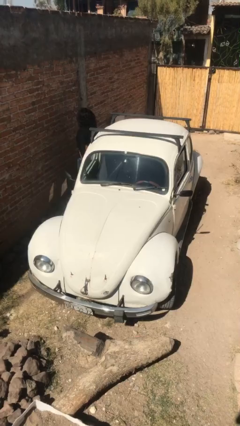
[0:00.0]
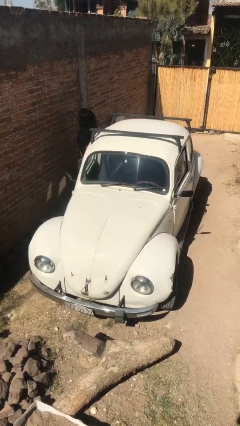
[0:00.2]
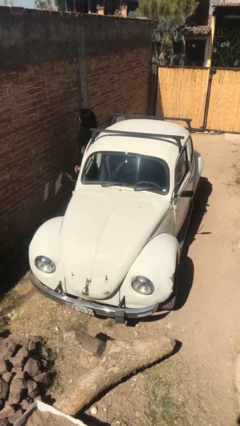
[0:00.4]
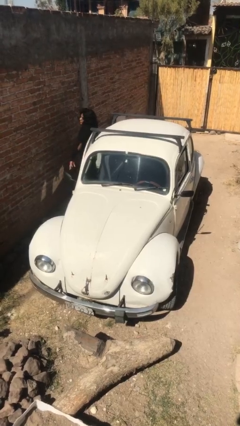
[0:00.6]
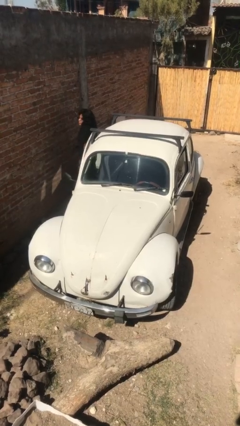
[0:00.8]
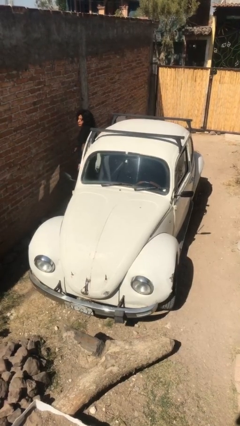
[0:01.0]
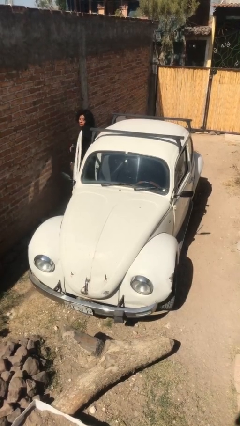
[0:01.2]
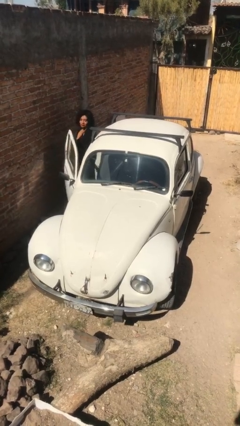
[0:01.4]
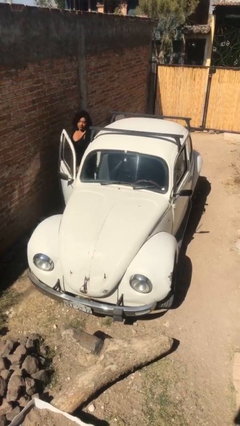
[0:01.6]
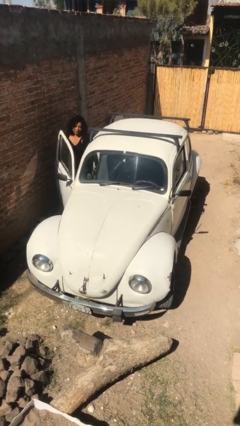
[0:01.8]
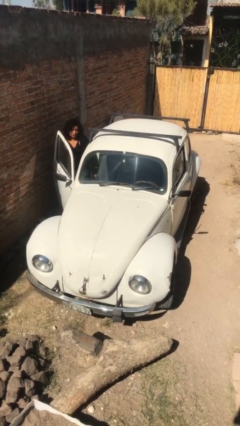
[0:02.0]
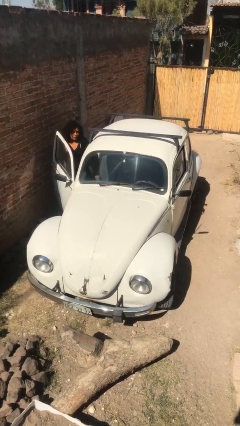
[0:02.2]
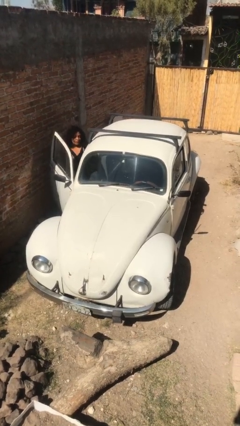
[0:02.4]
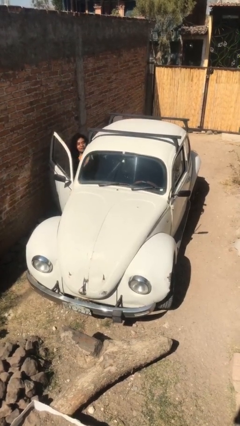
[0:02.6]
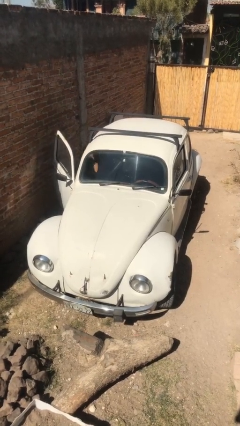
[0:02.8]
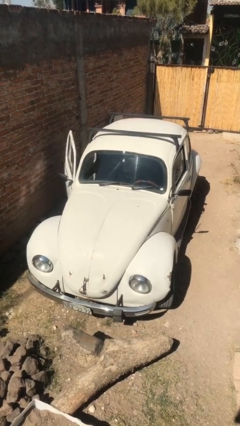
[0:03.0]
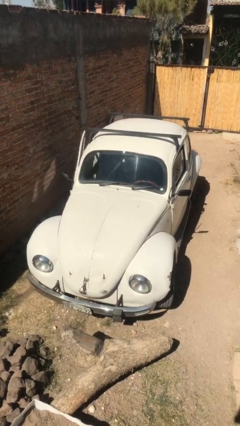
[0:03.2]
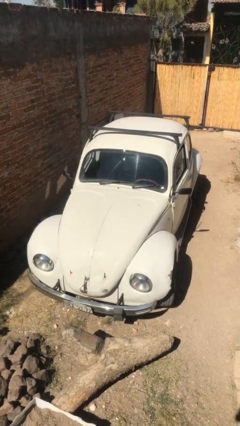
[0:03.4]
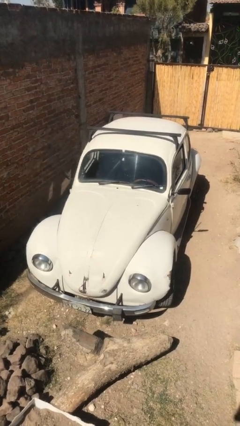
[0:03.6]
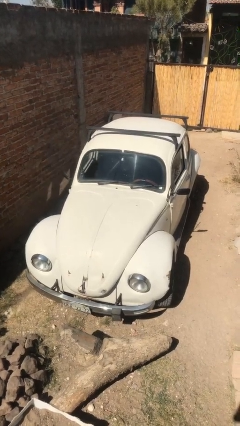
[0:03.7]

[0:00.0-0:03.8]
car picks up person

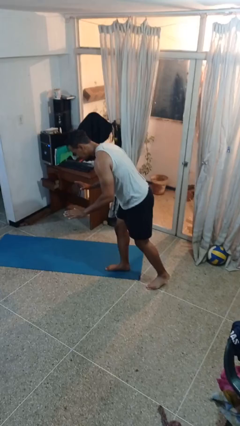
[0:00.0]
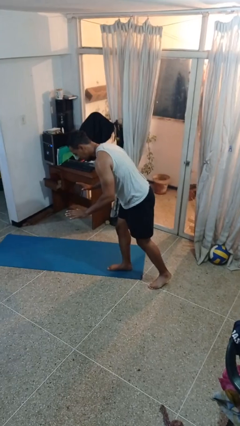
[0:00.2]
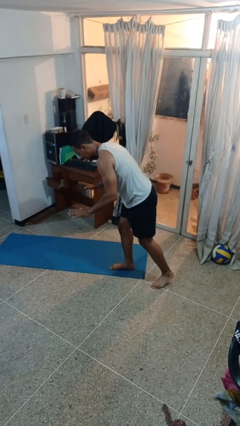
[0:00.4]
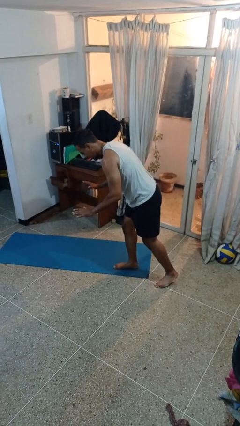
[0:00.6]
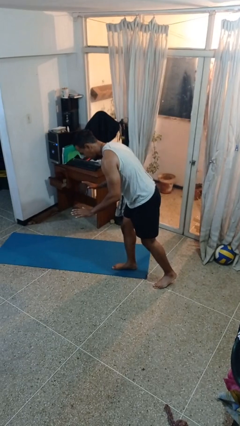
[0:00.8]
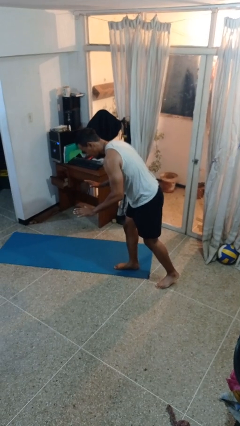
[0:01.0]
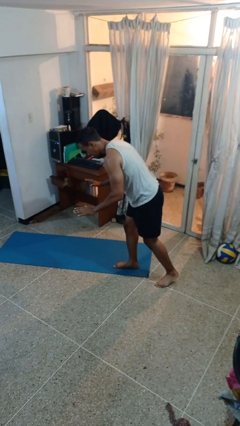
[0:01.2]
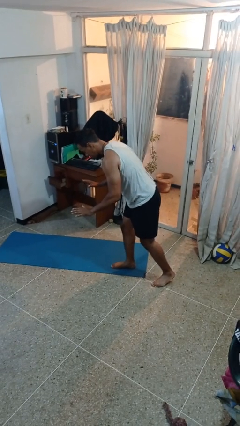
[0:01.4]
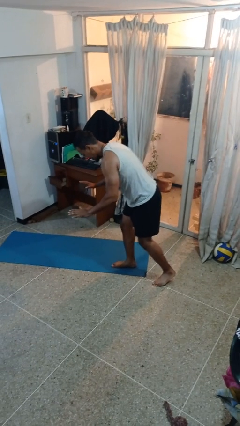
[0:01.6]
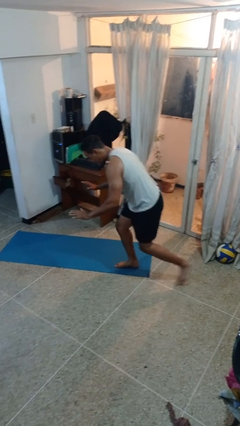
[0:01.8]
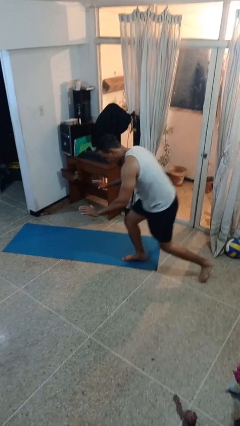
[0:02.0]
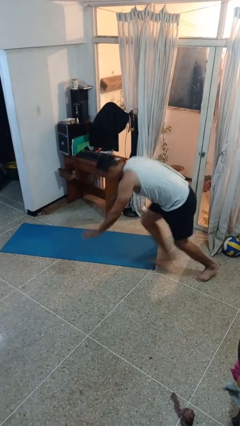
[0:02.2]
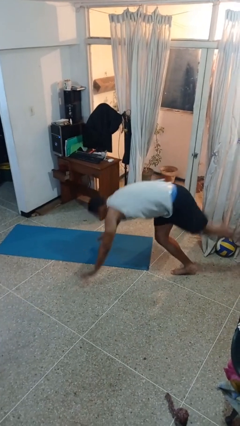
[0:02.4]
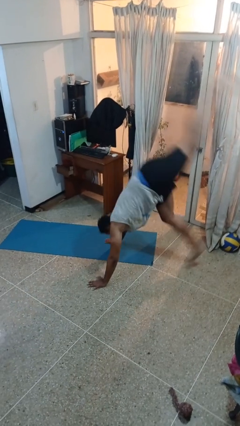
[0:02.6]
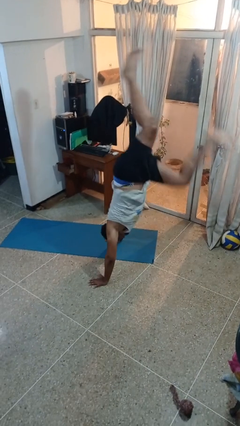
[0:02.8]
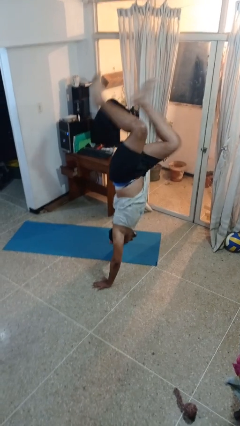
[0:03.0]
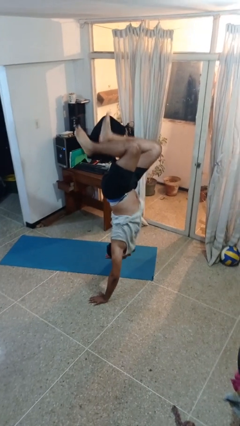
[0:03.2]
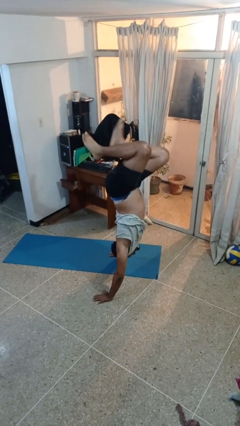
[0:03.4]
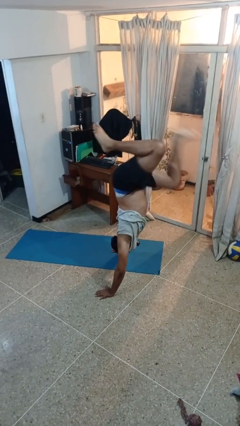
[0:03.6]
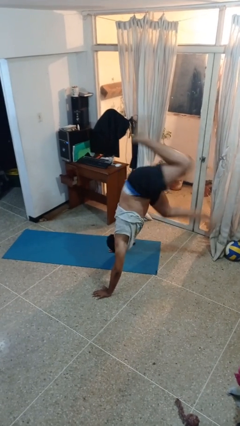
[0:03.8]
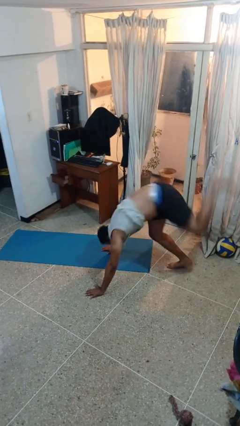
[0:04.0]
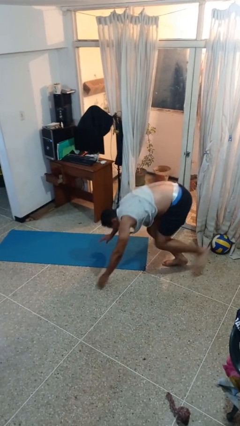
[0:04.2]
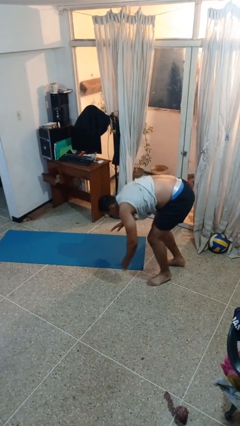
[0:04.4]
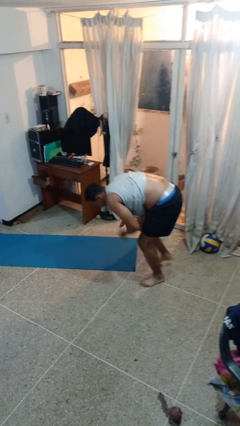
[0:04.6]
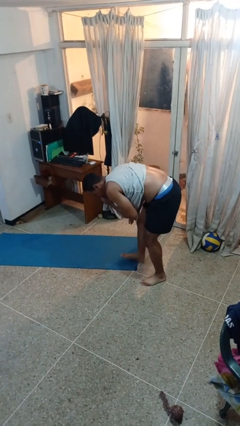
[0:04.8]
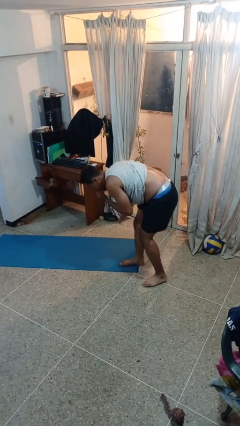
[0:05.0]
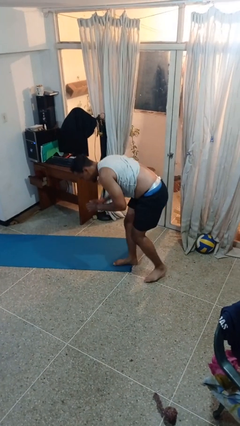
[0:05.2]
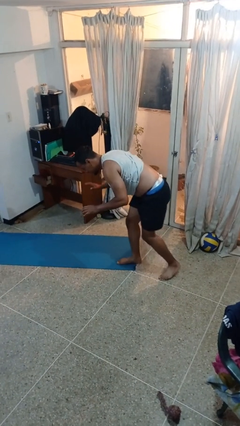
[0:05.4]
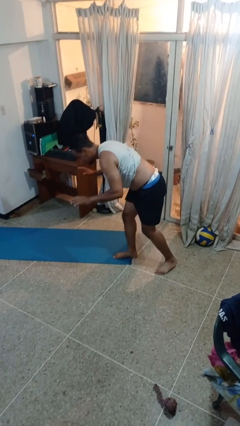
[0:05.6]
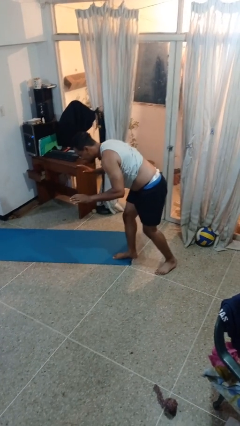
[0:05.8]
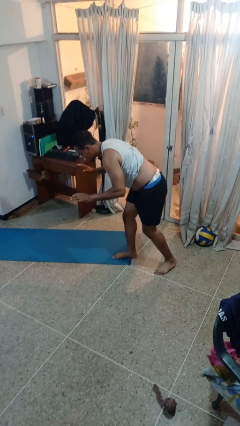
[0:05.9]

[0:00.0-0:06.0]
person handstand

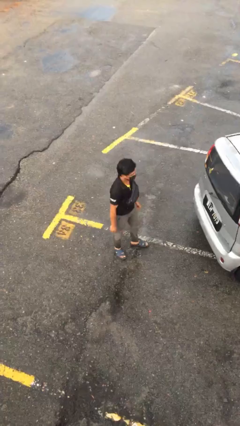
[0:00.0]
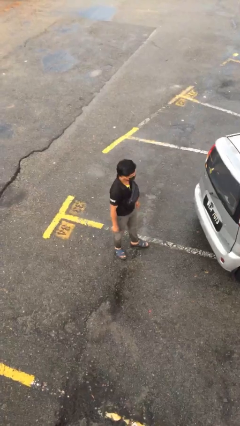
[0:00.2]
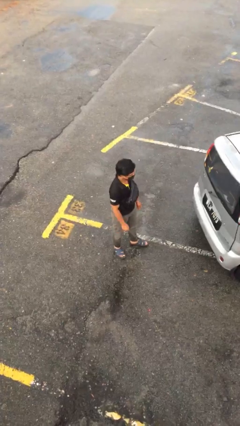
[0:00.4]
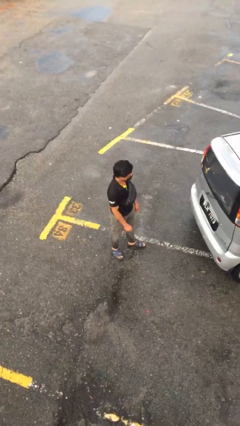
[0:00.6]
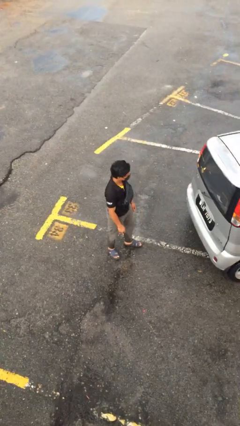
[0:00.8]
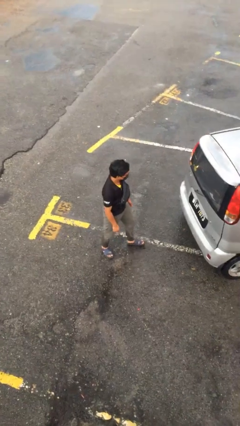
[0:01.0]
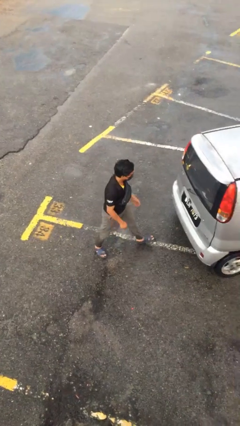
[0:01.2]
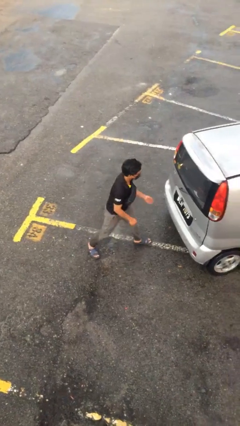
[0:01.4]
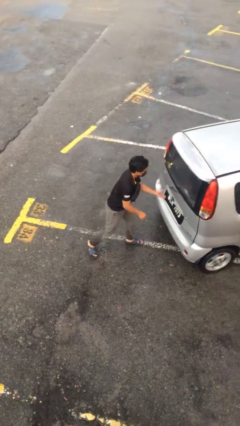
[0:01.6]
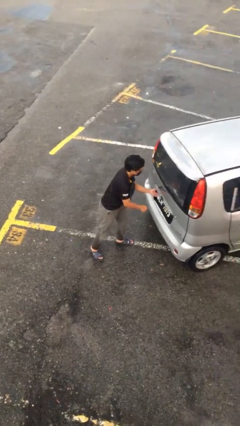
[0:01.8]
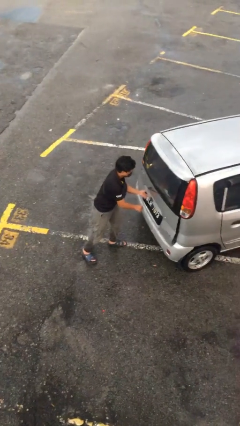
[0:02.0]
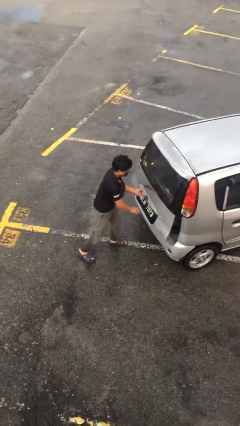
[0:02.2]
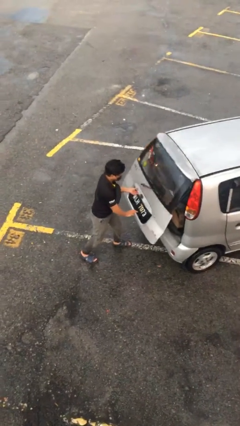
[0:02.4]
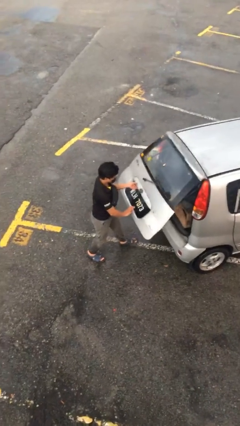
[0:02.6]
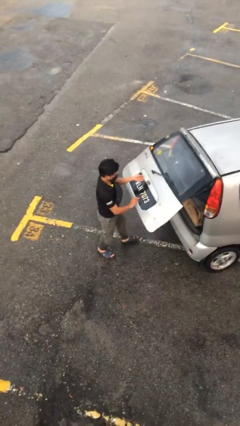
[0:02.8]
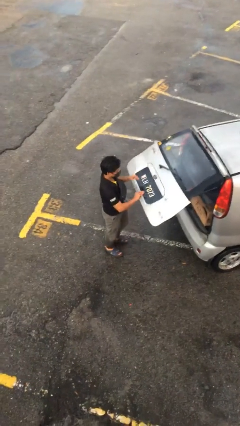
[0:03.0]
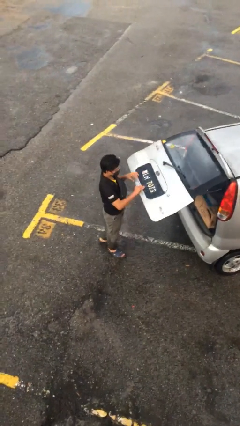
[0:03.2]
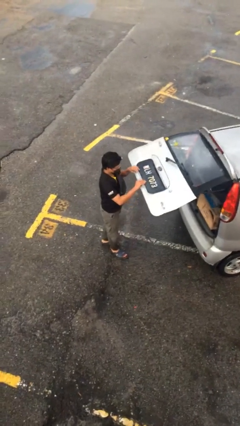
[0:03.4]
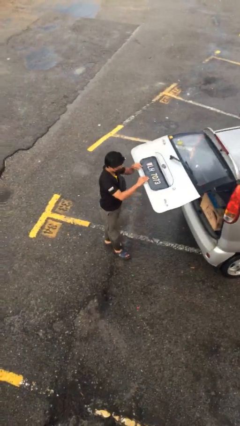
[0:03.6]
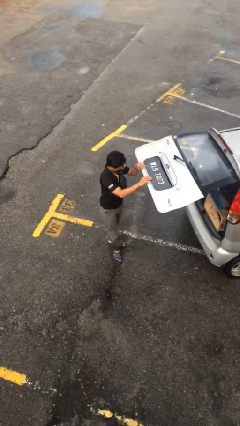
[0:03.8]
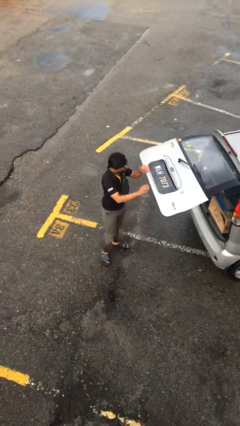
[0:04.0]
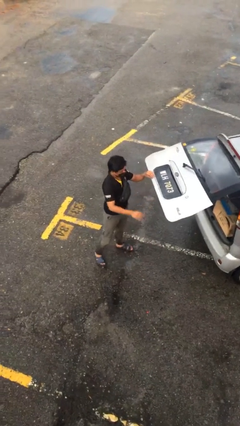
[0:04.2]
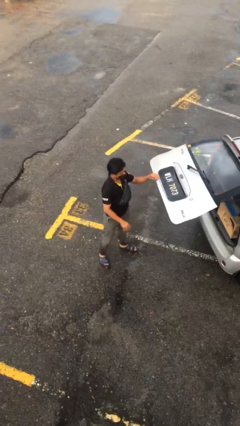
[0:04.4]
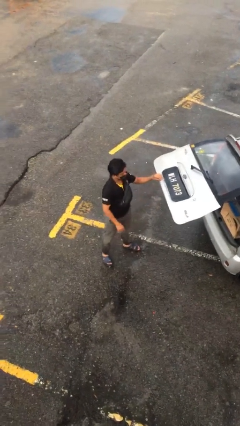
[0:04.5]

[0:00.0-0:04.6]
person opens car trunk

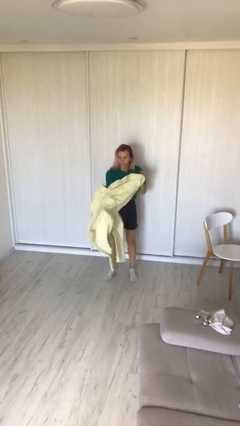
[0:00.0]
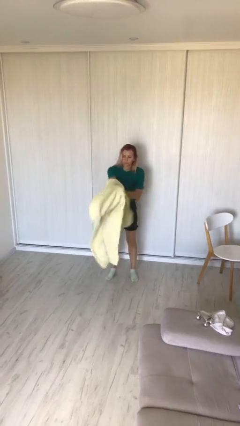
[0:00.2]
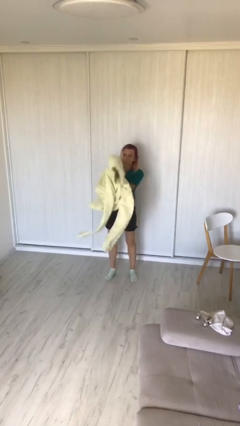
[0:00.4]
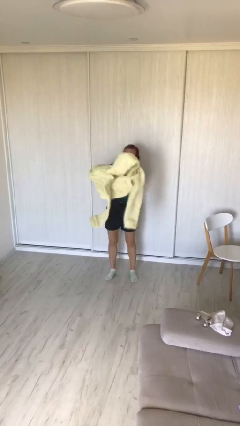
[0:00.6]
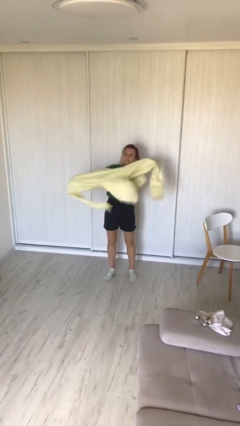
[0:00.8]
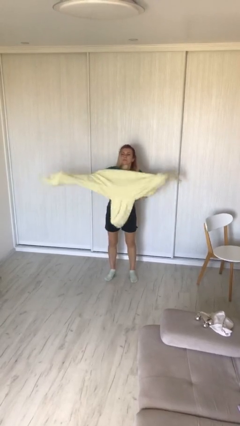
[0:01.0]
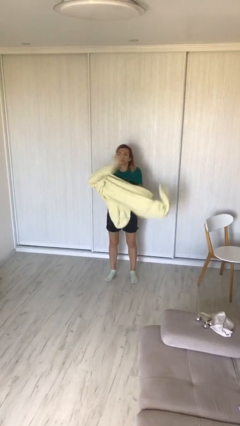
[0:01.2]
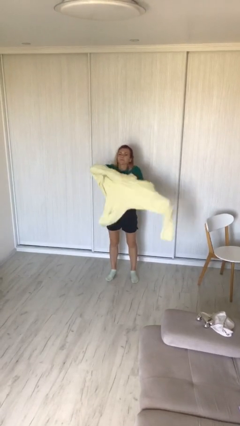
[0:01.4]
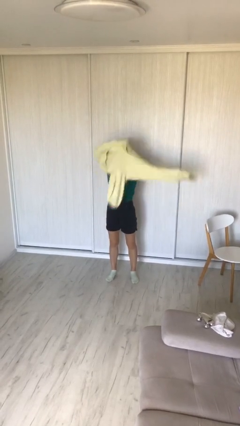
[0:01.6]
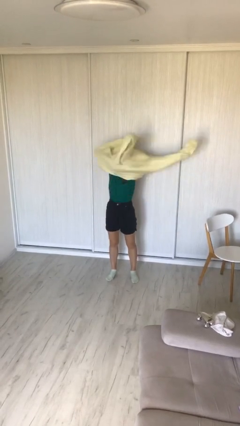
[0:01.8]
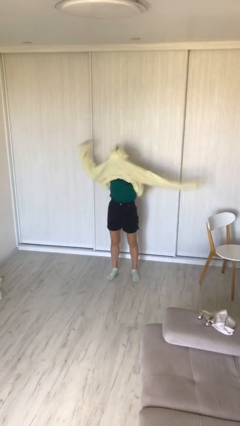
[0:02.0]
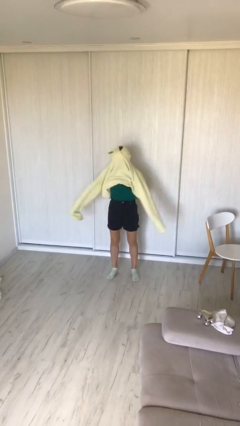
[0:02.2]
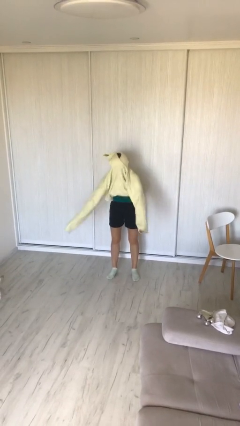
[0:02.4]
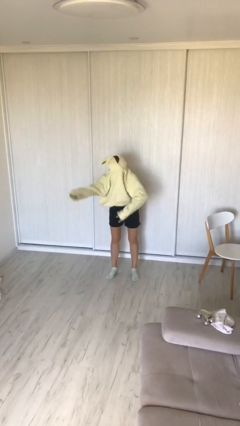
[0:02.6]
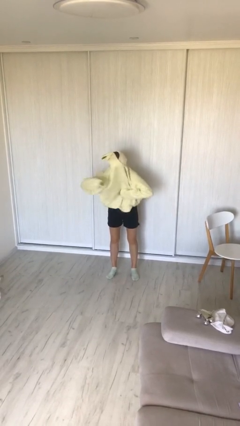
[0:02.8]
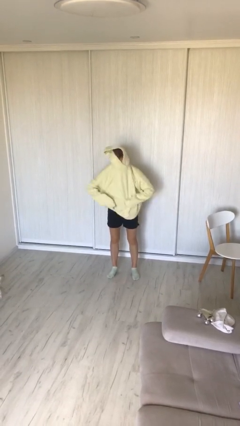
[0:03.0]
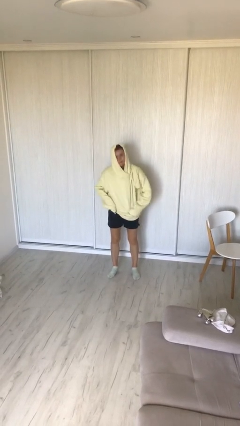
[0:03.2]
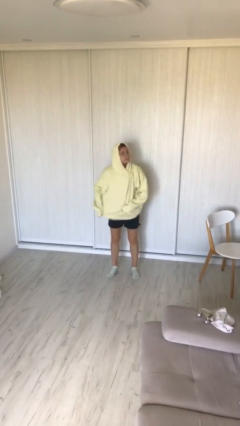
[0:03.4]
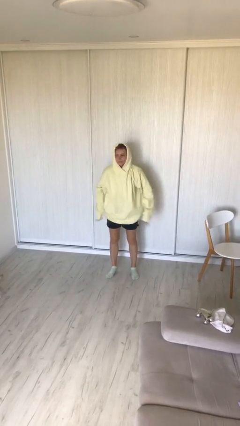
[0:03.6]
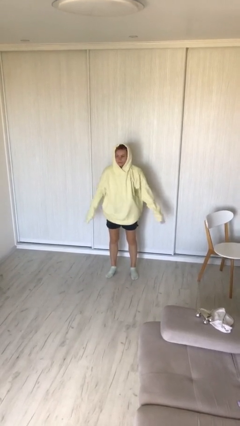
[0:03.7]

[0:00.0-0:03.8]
person puts on hoodie
